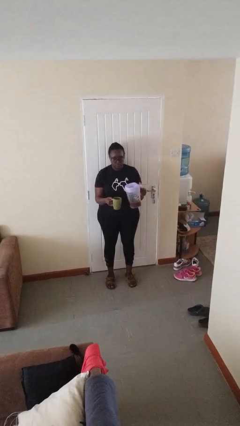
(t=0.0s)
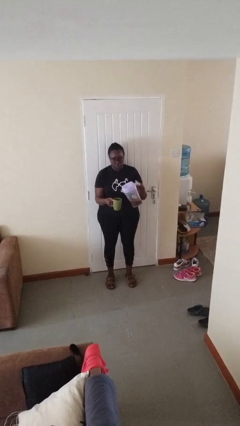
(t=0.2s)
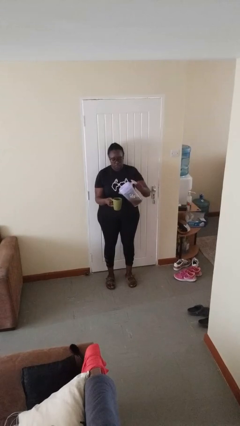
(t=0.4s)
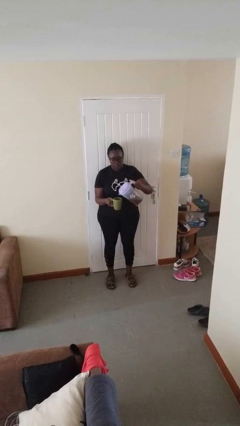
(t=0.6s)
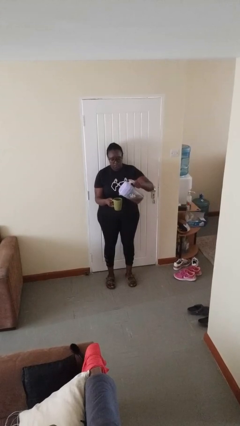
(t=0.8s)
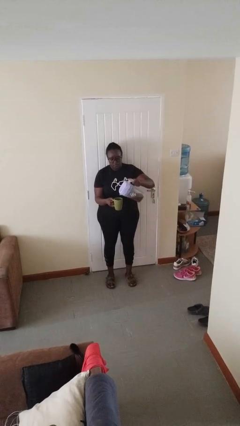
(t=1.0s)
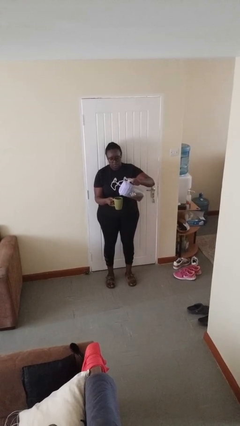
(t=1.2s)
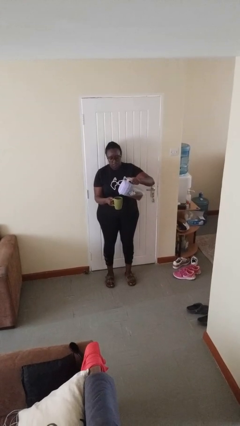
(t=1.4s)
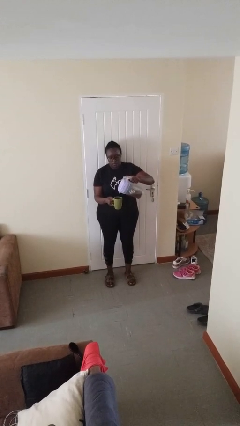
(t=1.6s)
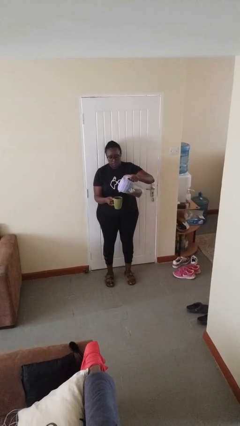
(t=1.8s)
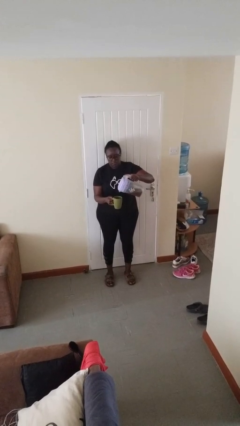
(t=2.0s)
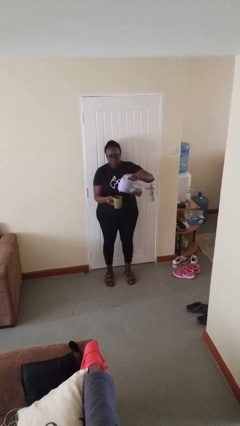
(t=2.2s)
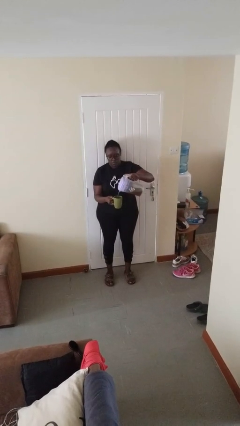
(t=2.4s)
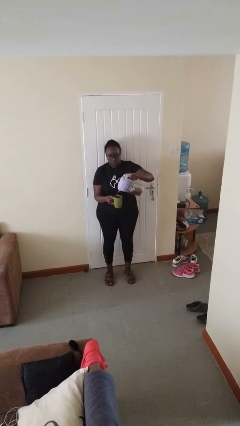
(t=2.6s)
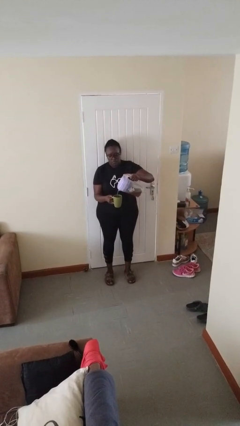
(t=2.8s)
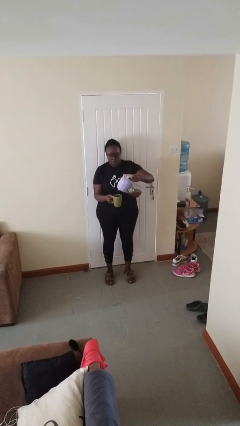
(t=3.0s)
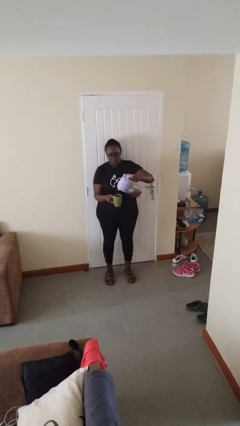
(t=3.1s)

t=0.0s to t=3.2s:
person pours coffee into mug

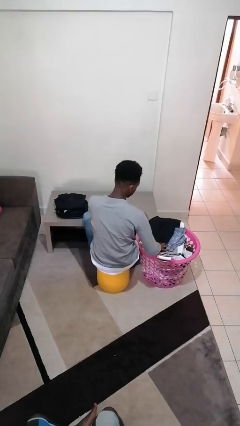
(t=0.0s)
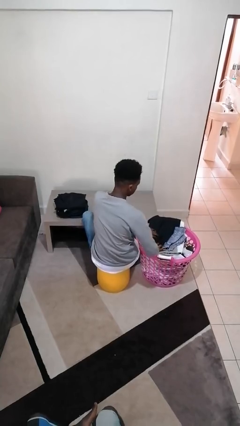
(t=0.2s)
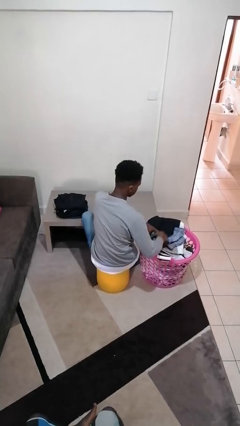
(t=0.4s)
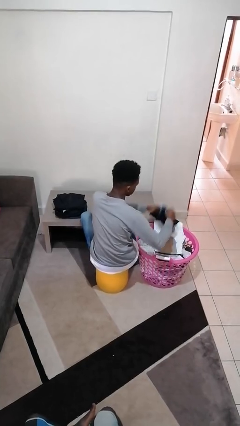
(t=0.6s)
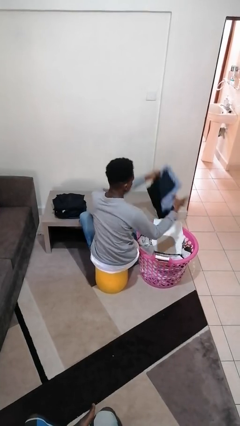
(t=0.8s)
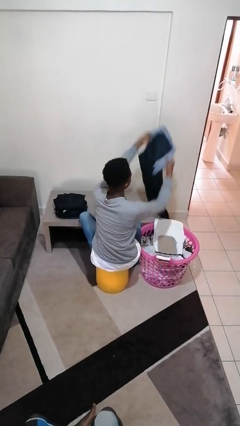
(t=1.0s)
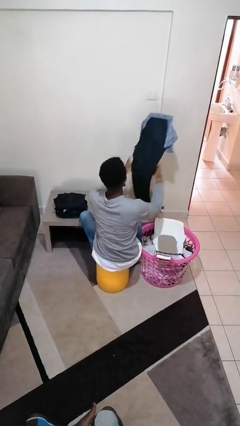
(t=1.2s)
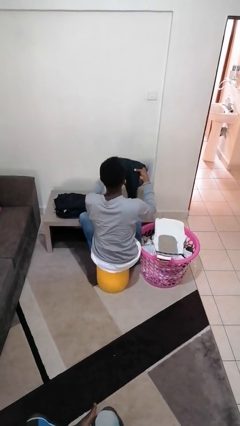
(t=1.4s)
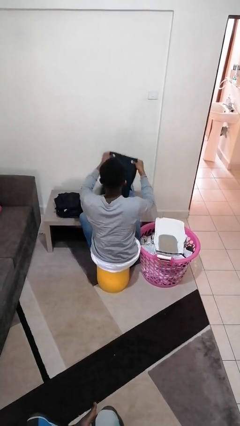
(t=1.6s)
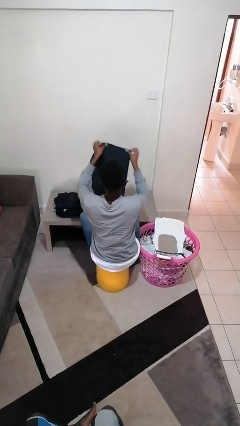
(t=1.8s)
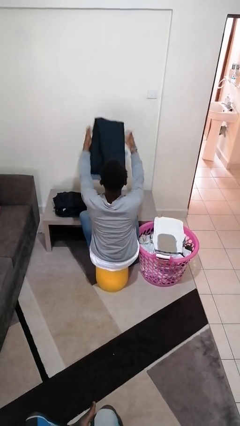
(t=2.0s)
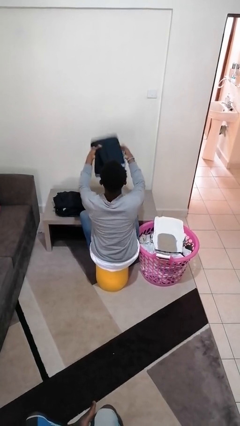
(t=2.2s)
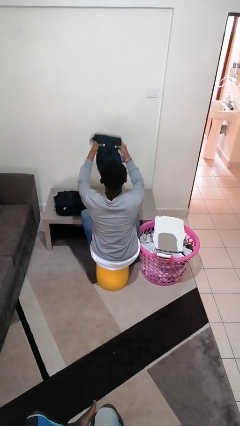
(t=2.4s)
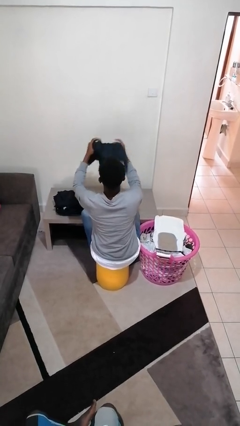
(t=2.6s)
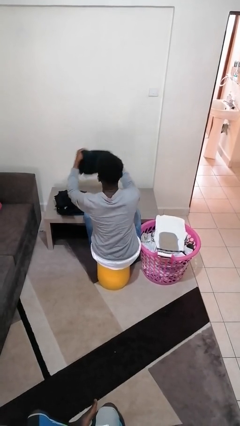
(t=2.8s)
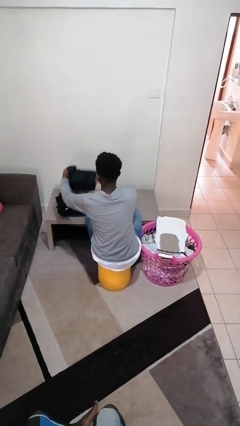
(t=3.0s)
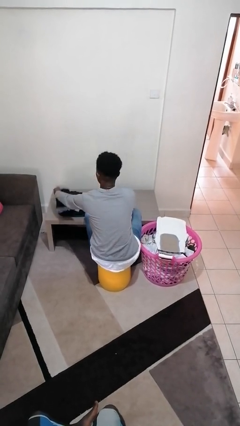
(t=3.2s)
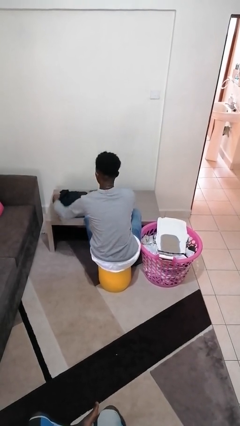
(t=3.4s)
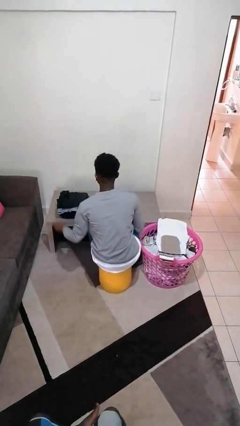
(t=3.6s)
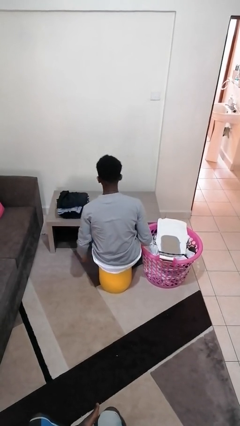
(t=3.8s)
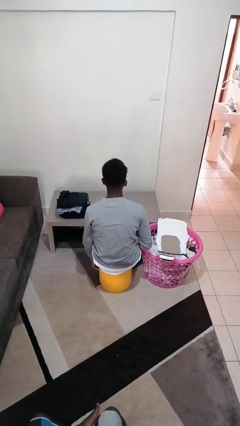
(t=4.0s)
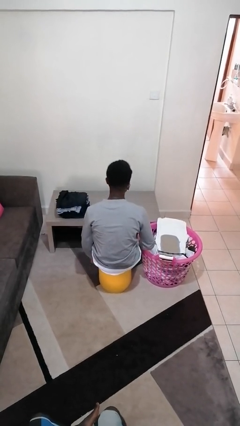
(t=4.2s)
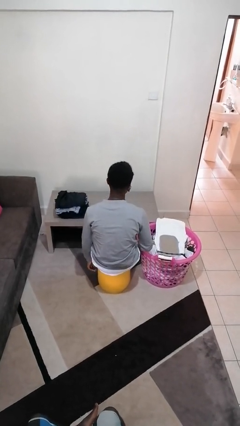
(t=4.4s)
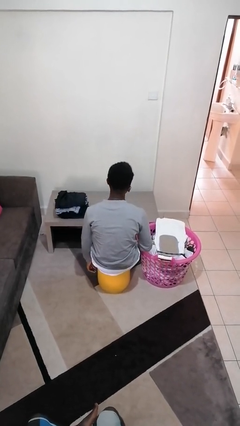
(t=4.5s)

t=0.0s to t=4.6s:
person folds pants

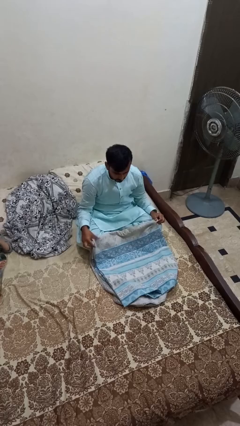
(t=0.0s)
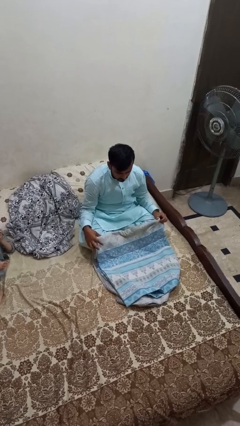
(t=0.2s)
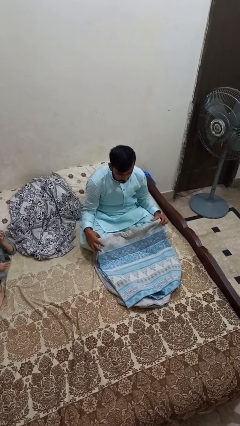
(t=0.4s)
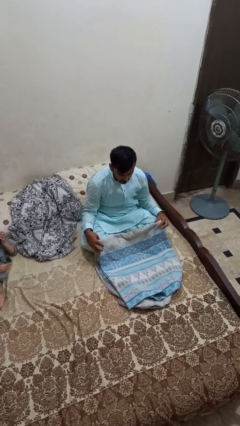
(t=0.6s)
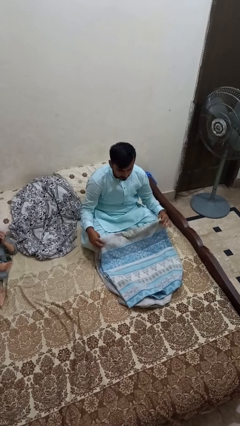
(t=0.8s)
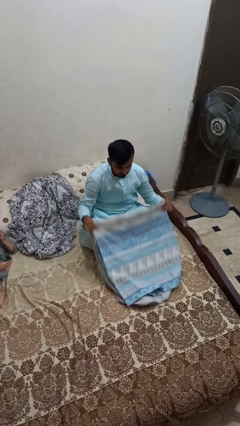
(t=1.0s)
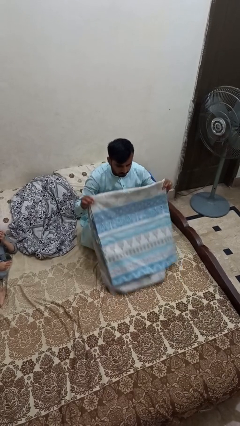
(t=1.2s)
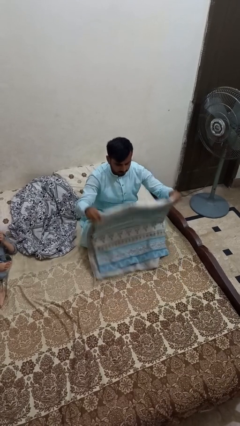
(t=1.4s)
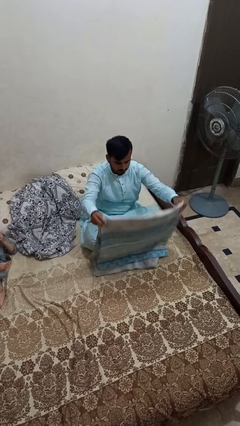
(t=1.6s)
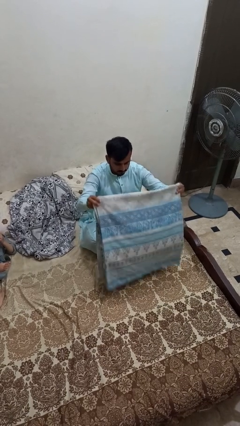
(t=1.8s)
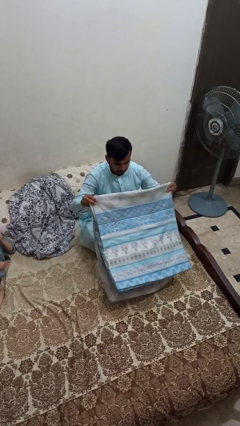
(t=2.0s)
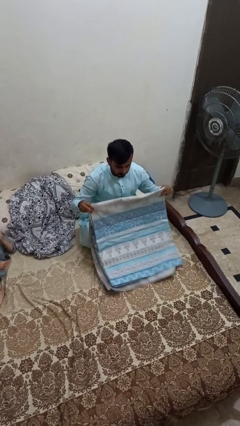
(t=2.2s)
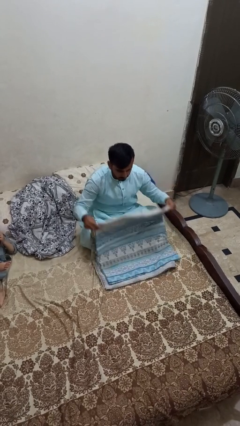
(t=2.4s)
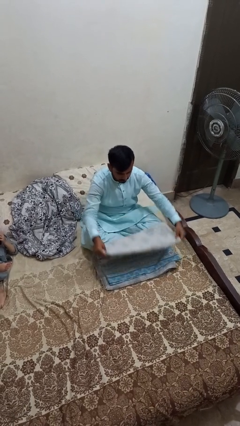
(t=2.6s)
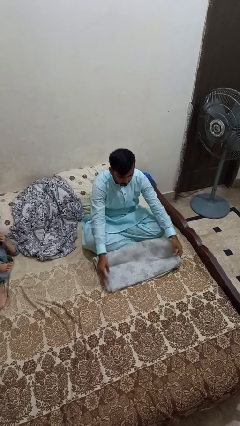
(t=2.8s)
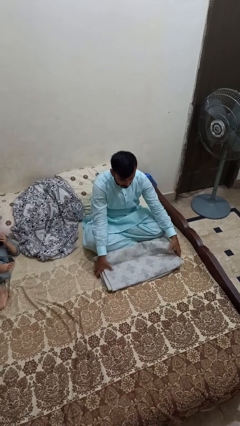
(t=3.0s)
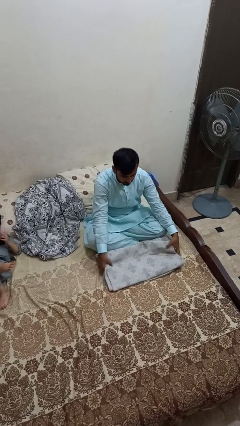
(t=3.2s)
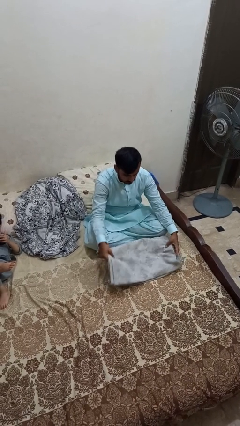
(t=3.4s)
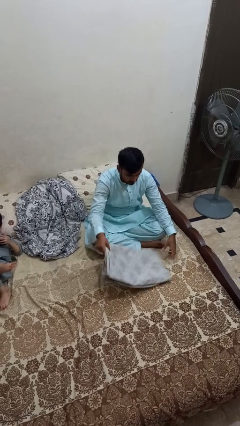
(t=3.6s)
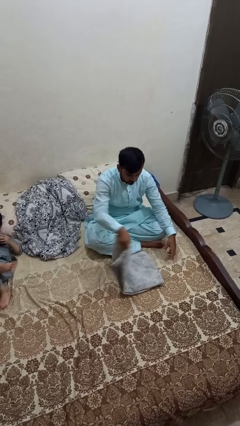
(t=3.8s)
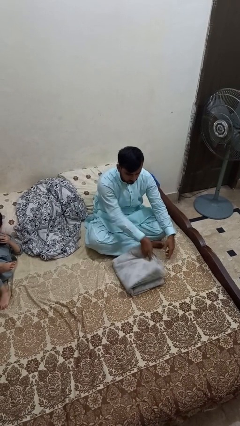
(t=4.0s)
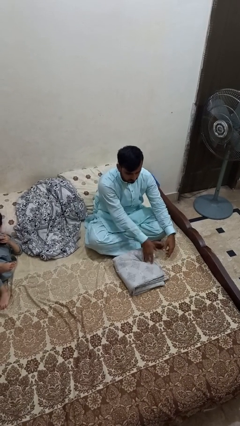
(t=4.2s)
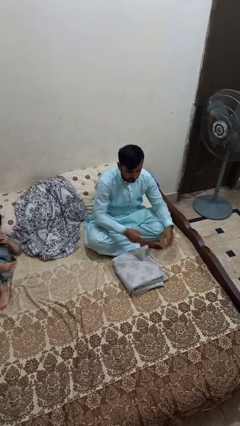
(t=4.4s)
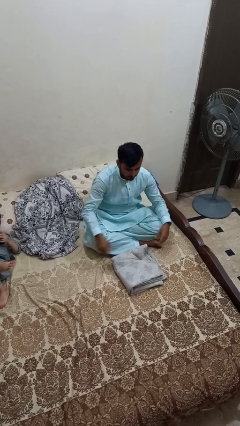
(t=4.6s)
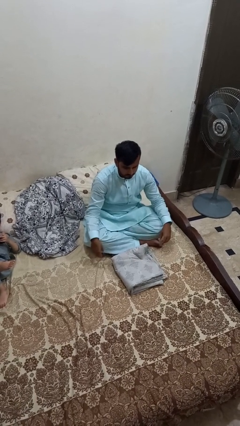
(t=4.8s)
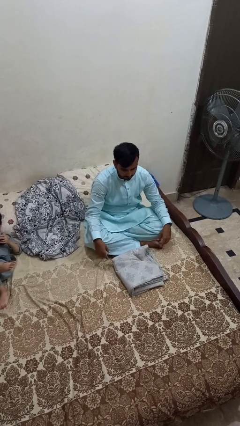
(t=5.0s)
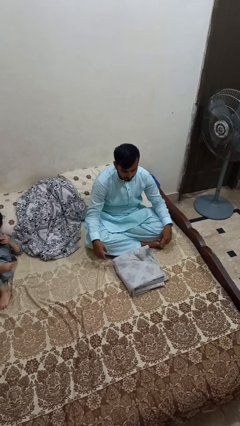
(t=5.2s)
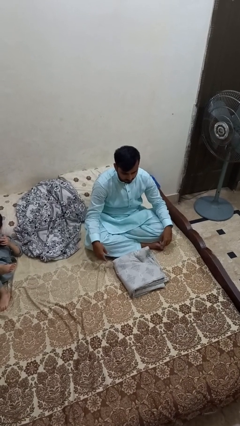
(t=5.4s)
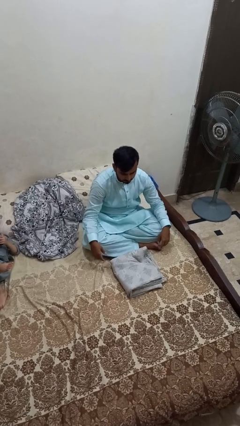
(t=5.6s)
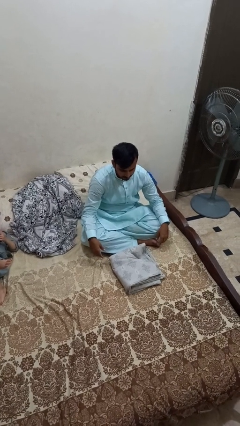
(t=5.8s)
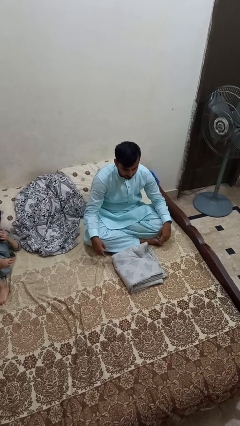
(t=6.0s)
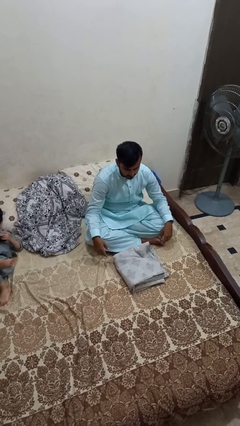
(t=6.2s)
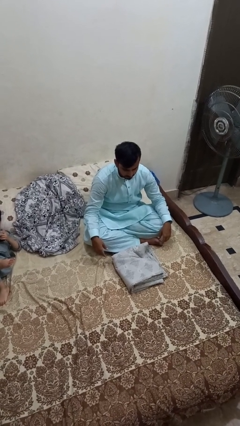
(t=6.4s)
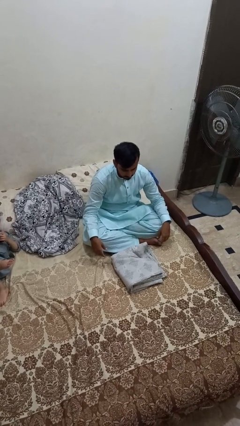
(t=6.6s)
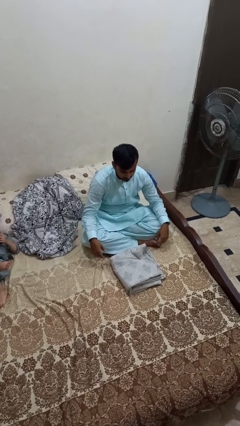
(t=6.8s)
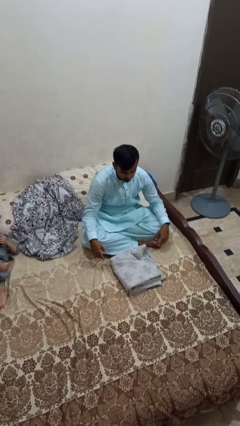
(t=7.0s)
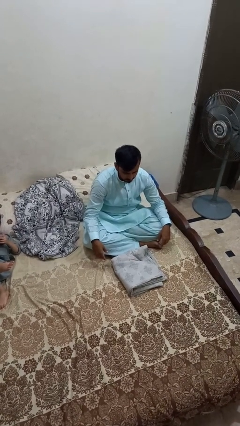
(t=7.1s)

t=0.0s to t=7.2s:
person folds blanket

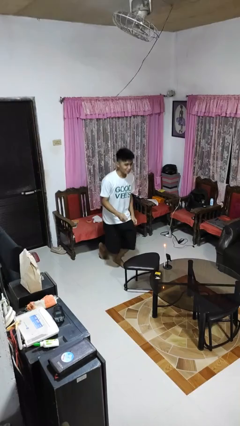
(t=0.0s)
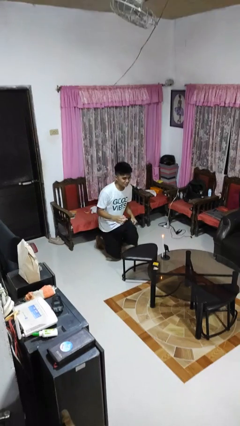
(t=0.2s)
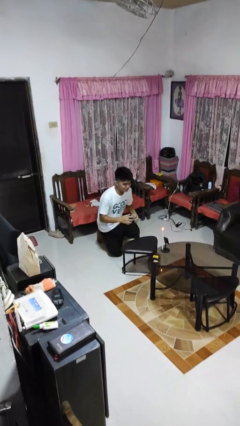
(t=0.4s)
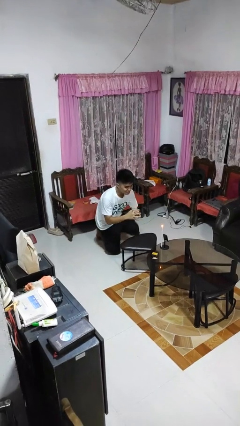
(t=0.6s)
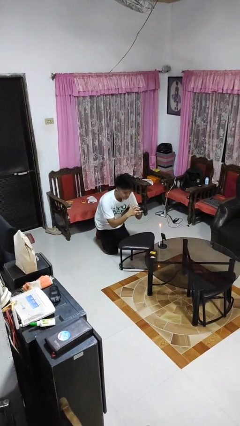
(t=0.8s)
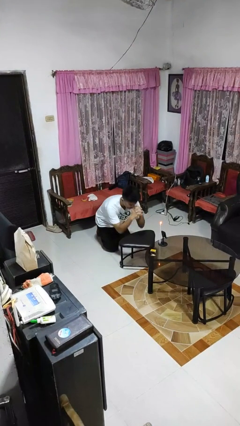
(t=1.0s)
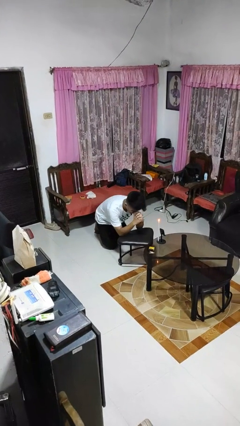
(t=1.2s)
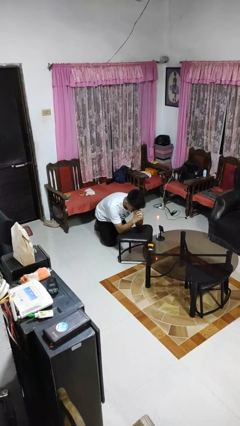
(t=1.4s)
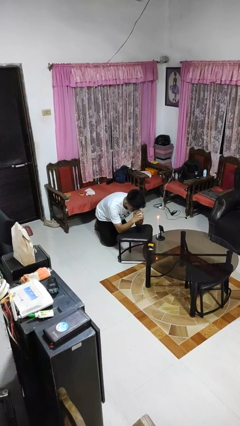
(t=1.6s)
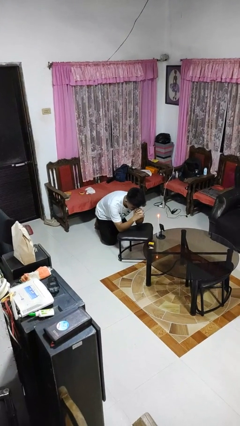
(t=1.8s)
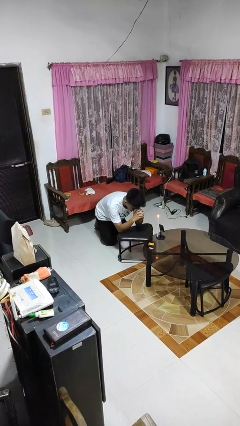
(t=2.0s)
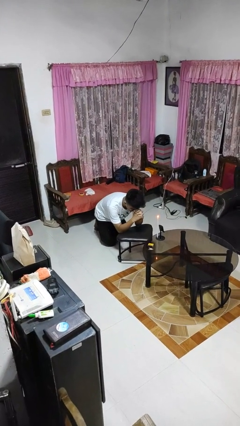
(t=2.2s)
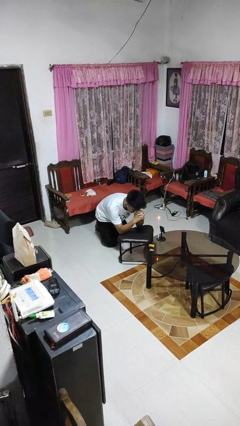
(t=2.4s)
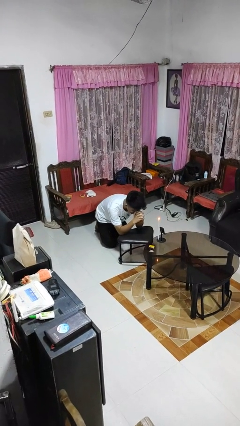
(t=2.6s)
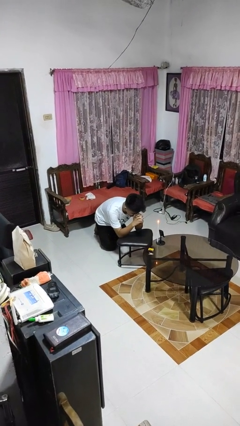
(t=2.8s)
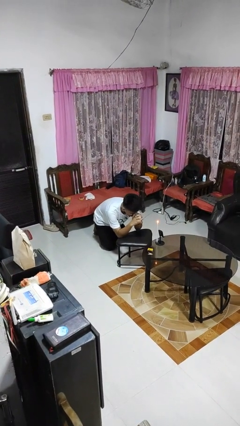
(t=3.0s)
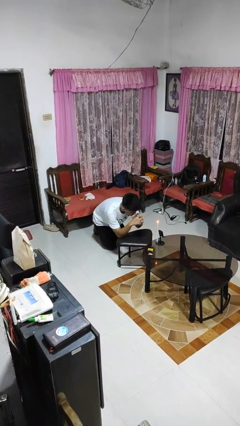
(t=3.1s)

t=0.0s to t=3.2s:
person prays
